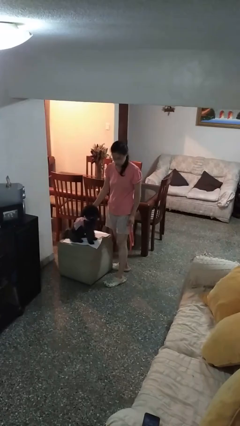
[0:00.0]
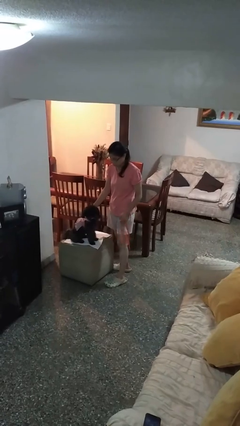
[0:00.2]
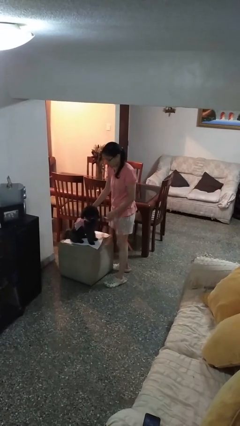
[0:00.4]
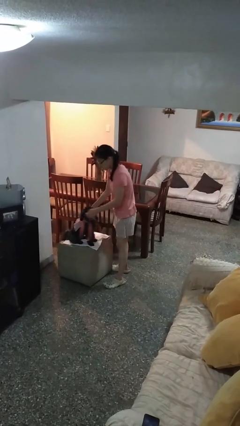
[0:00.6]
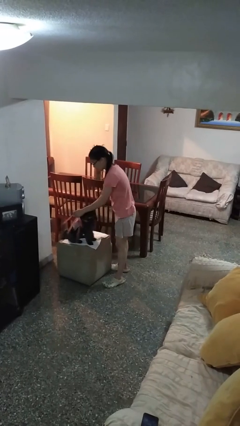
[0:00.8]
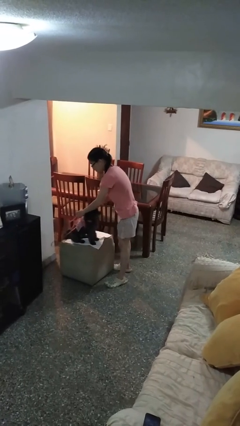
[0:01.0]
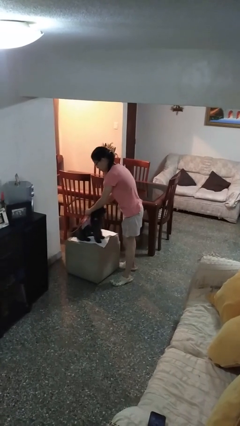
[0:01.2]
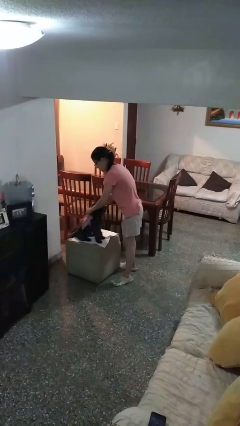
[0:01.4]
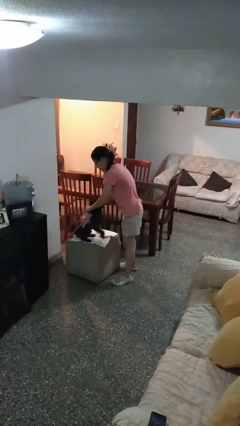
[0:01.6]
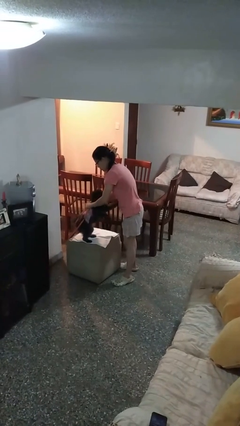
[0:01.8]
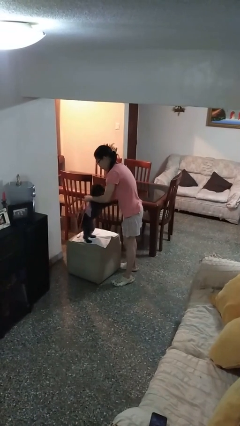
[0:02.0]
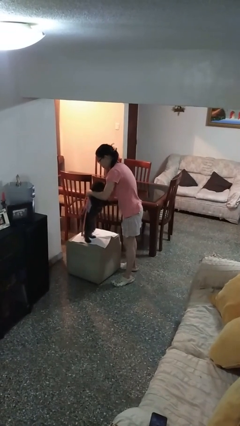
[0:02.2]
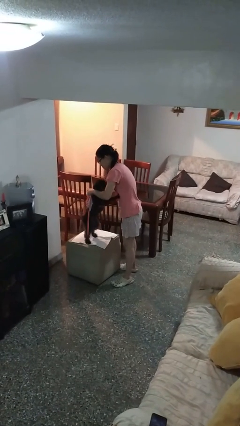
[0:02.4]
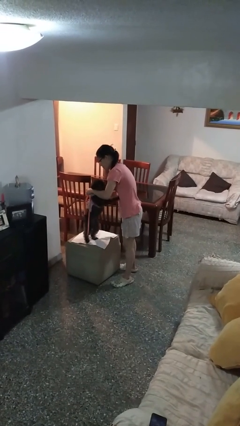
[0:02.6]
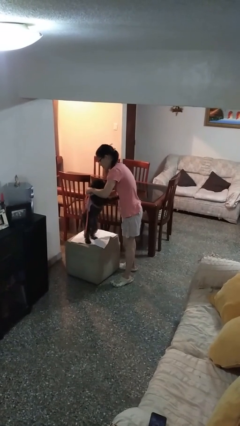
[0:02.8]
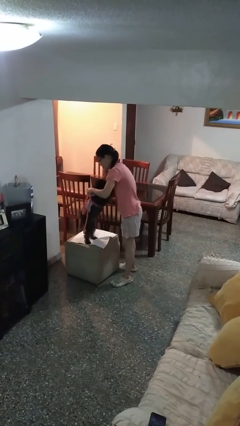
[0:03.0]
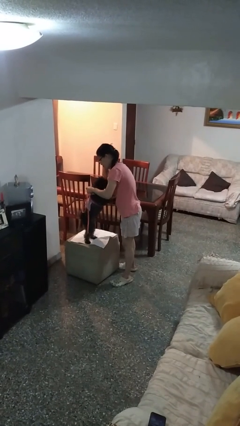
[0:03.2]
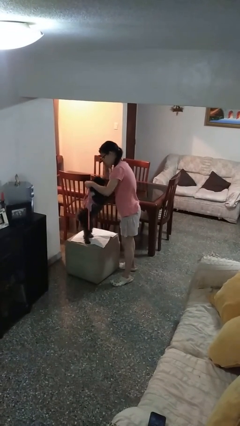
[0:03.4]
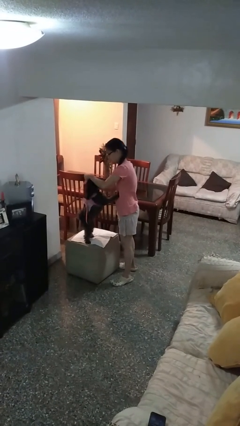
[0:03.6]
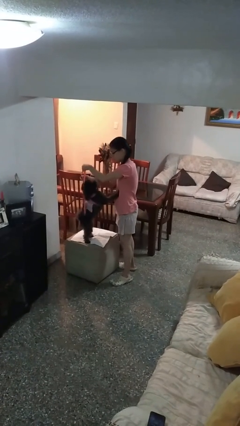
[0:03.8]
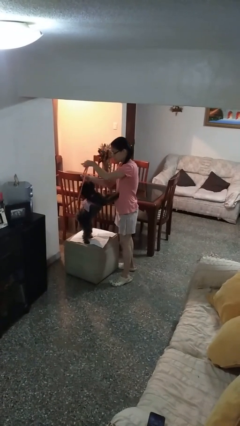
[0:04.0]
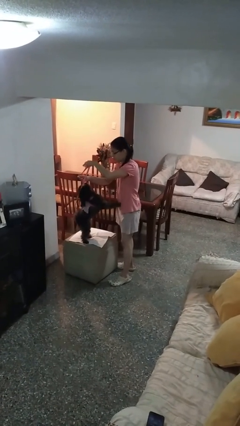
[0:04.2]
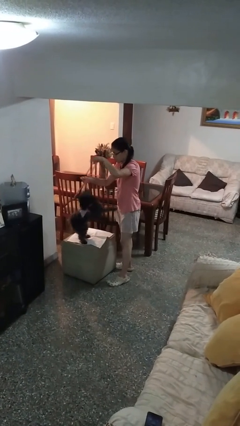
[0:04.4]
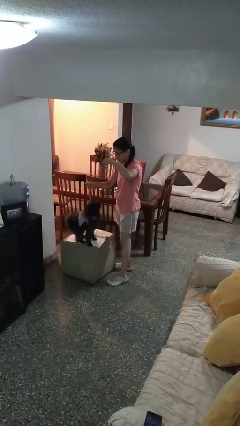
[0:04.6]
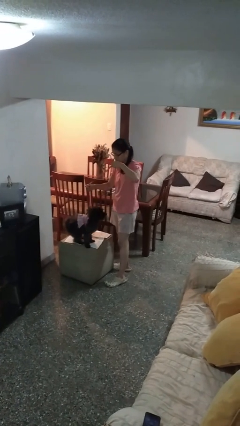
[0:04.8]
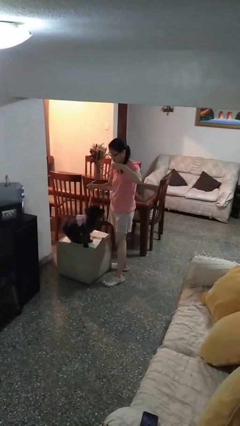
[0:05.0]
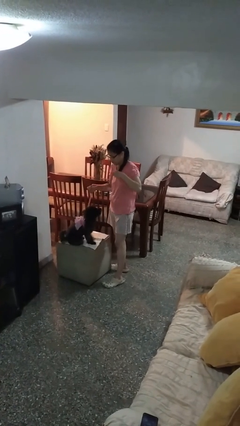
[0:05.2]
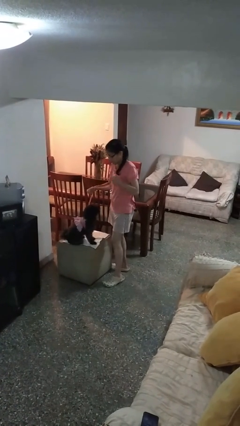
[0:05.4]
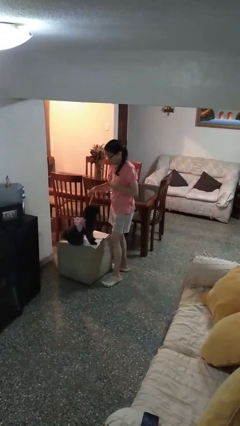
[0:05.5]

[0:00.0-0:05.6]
person attaches leash to dog

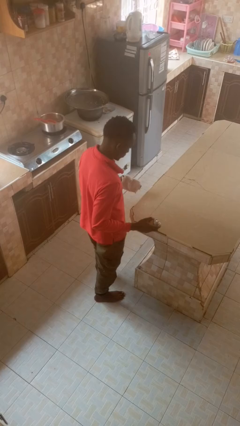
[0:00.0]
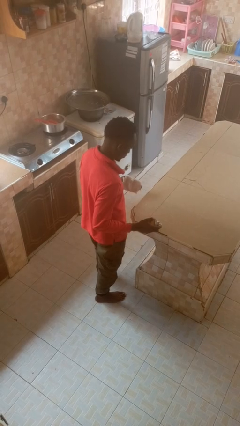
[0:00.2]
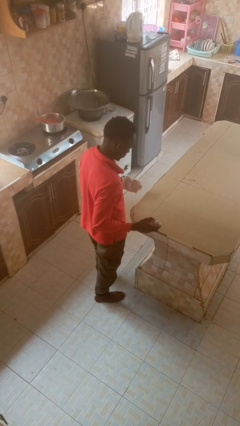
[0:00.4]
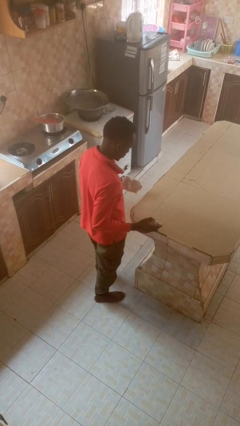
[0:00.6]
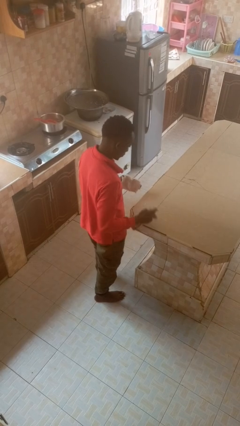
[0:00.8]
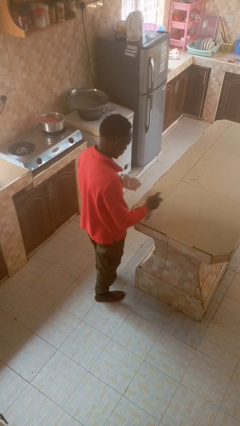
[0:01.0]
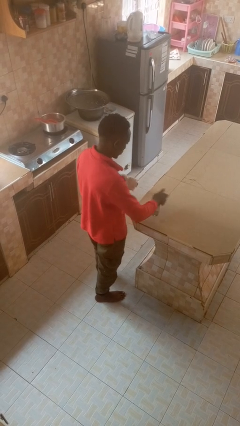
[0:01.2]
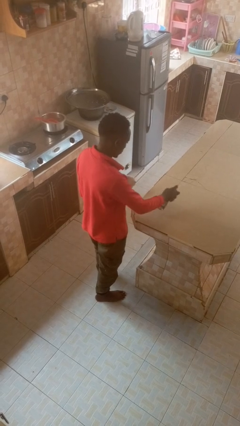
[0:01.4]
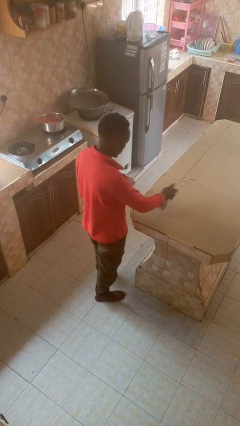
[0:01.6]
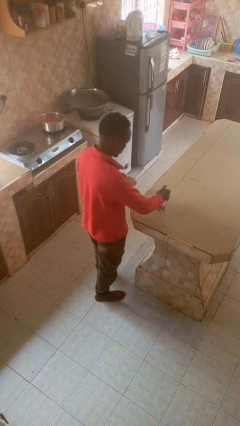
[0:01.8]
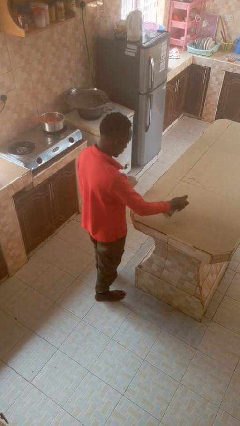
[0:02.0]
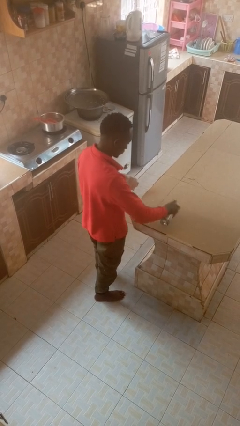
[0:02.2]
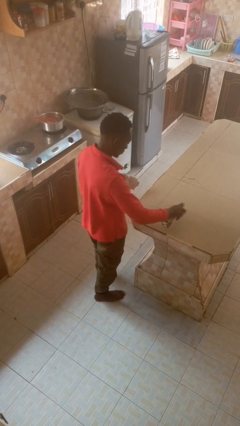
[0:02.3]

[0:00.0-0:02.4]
person sprays from bottle

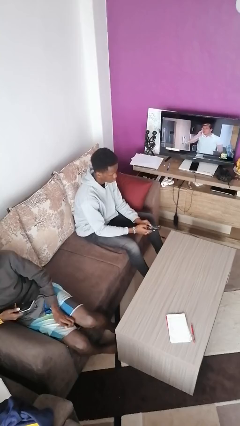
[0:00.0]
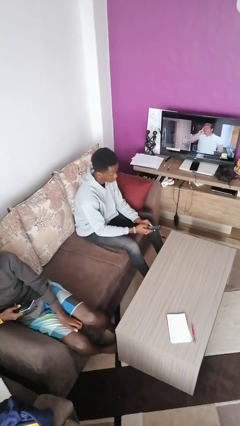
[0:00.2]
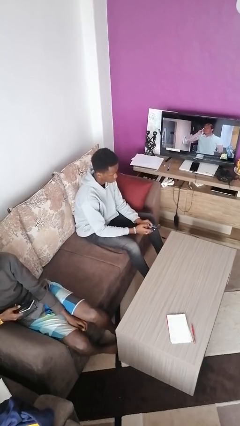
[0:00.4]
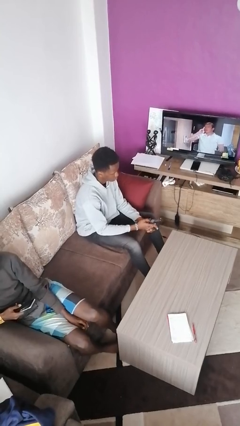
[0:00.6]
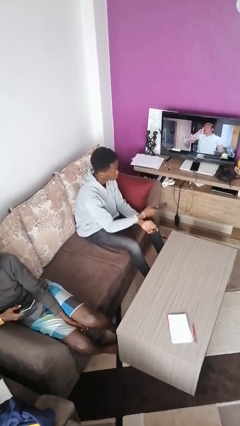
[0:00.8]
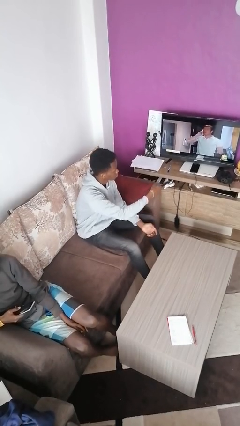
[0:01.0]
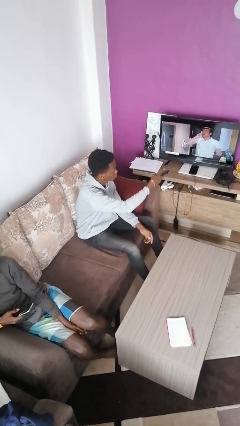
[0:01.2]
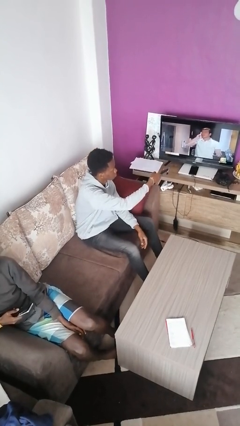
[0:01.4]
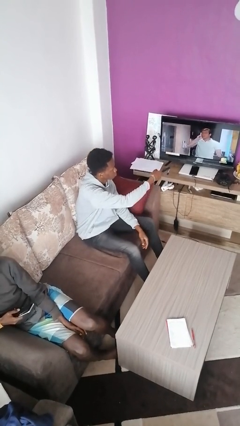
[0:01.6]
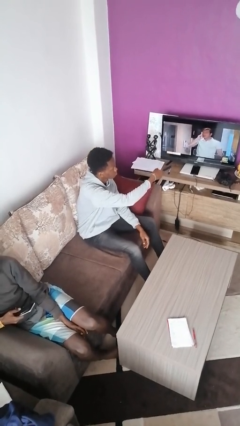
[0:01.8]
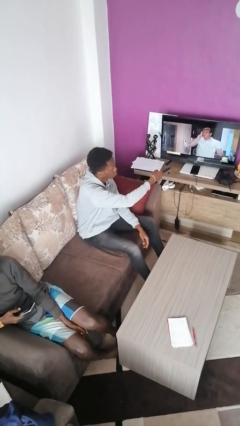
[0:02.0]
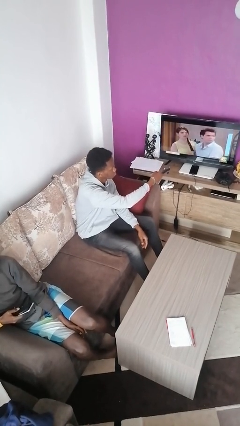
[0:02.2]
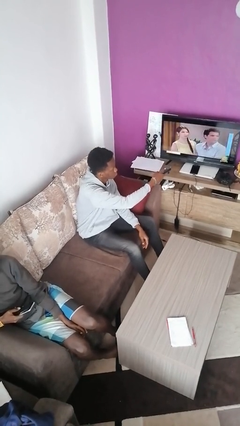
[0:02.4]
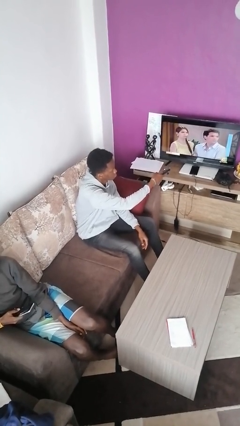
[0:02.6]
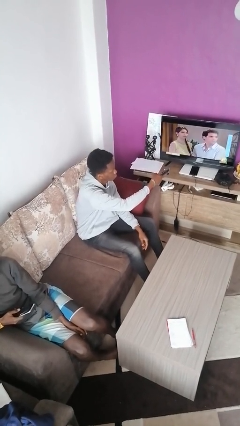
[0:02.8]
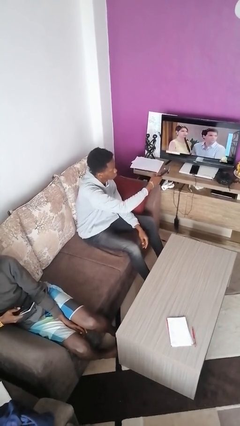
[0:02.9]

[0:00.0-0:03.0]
person uses television remote

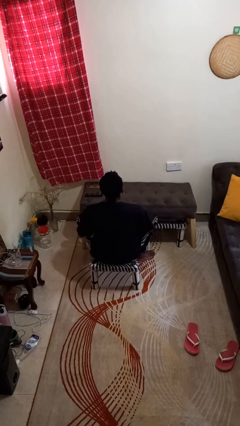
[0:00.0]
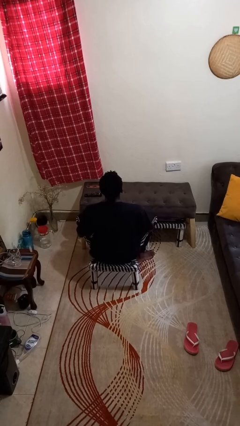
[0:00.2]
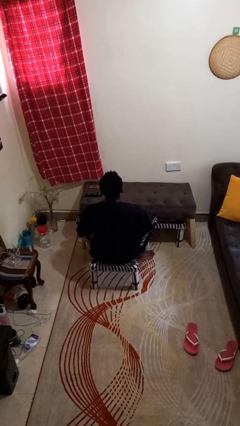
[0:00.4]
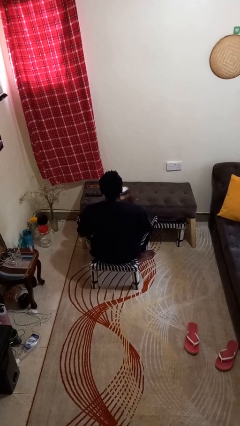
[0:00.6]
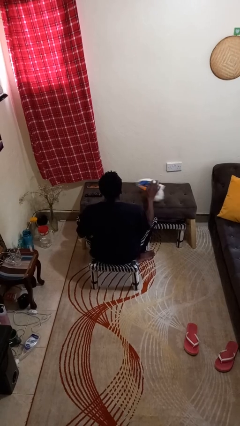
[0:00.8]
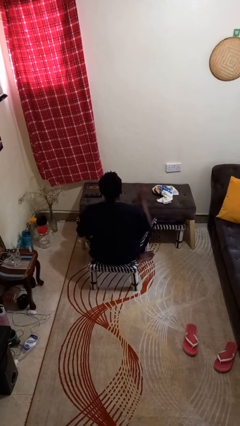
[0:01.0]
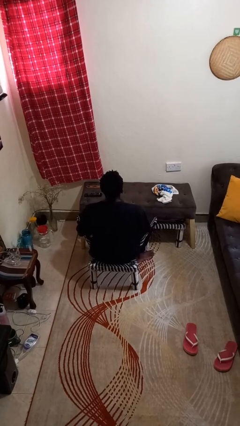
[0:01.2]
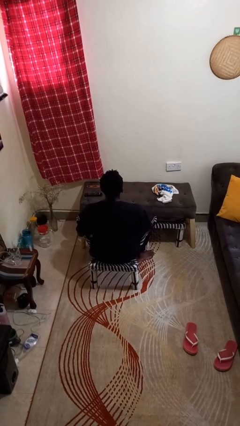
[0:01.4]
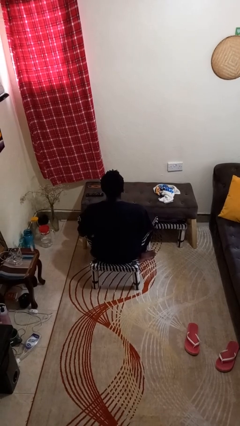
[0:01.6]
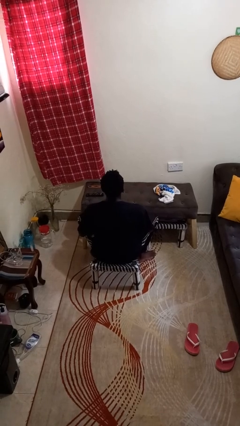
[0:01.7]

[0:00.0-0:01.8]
person throws object on table

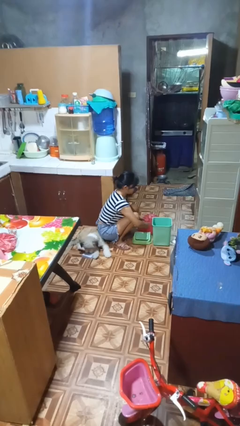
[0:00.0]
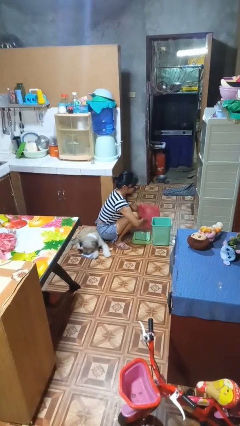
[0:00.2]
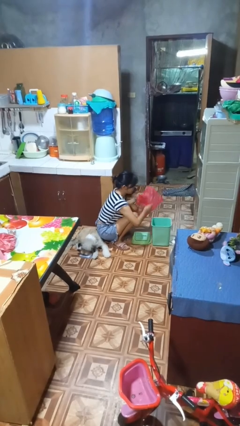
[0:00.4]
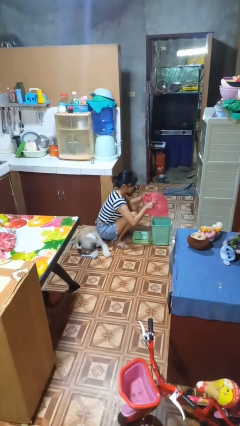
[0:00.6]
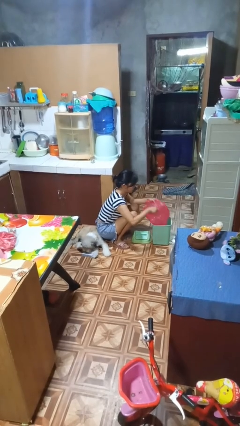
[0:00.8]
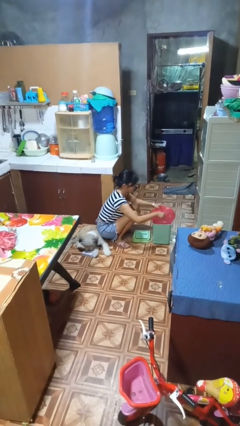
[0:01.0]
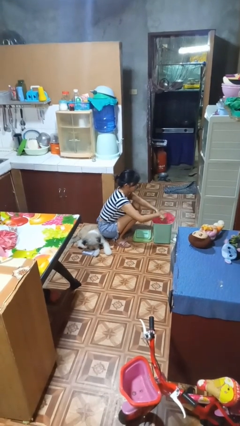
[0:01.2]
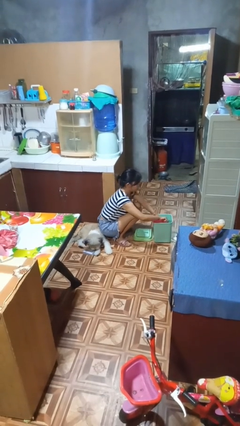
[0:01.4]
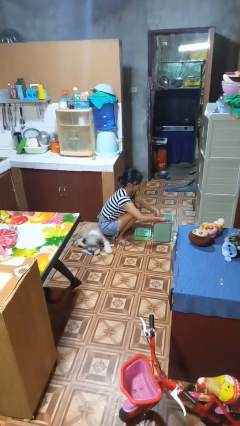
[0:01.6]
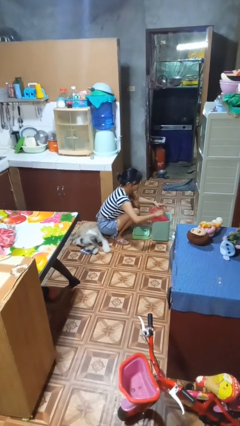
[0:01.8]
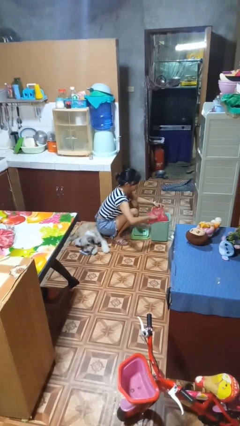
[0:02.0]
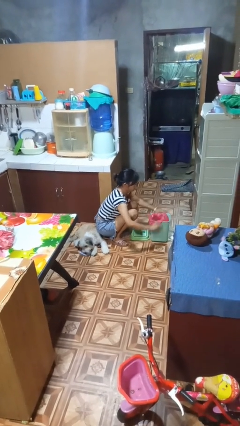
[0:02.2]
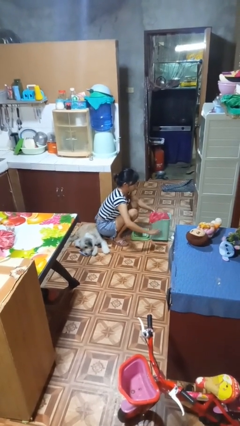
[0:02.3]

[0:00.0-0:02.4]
person inserts trashbag into trashcan

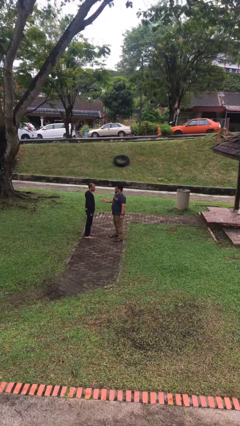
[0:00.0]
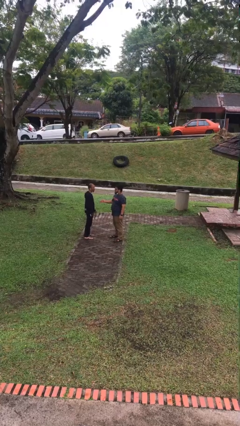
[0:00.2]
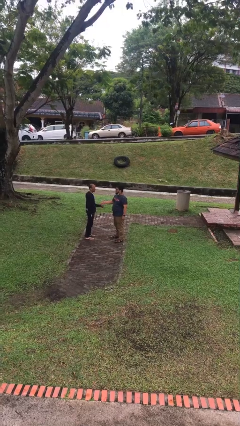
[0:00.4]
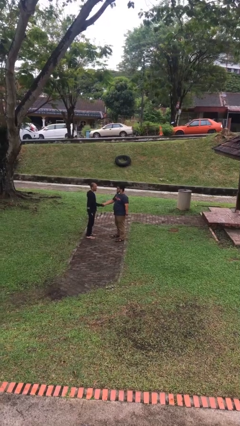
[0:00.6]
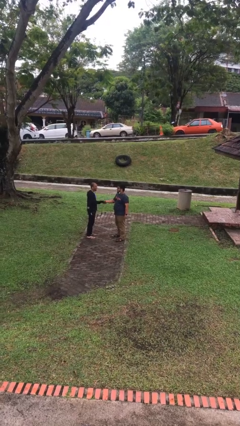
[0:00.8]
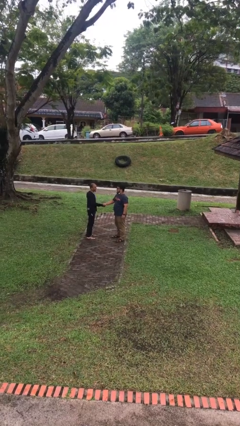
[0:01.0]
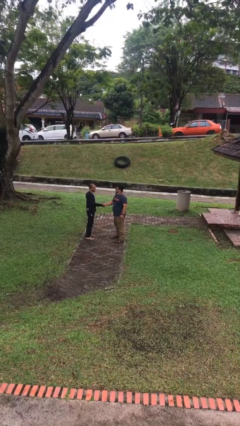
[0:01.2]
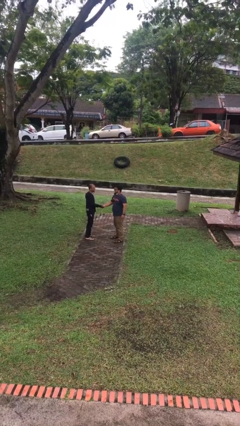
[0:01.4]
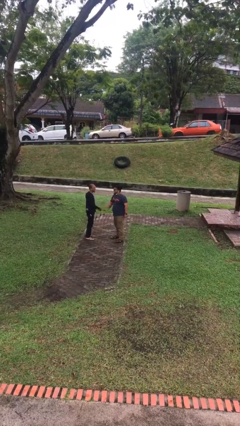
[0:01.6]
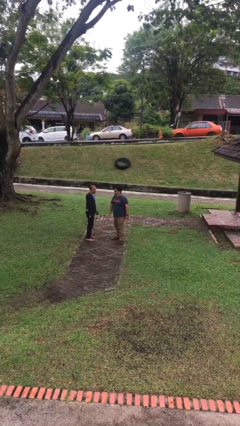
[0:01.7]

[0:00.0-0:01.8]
person shakes hand

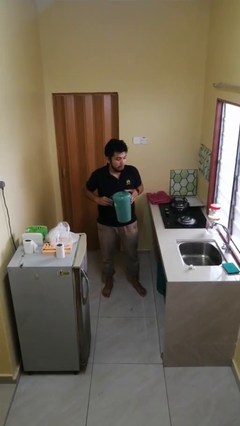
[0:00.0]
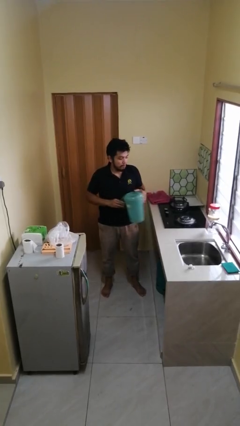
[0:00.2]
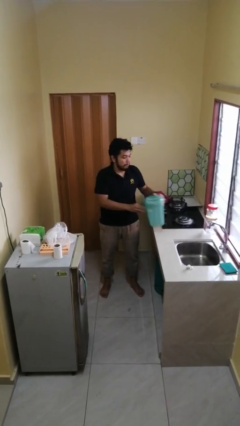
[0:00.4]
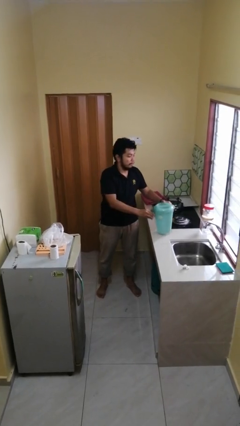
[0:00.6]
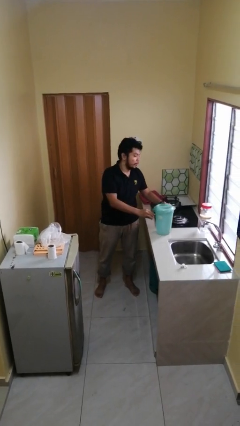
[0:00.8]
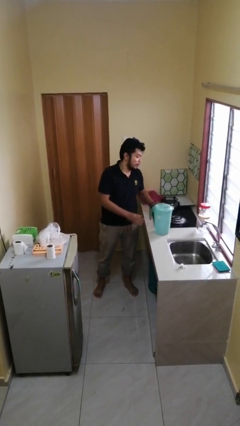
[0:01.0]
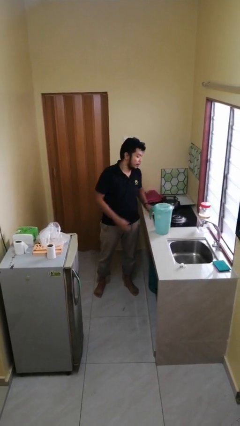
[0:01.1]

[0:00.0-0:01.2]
person puts down object on countertop
